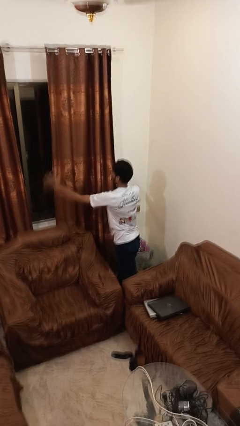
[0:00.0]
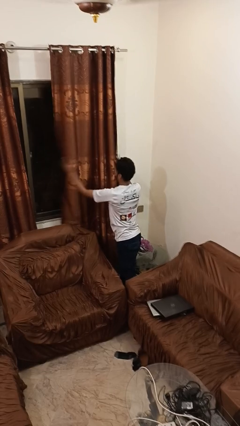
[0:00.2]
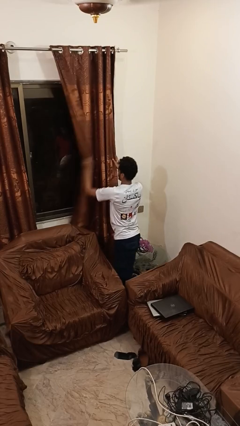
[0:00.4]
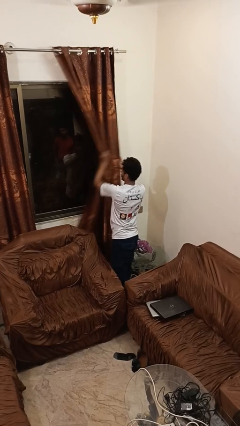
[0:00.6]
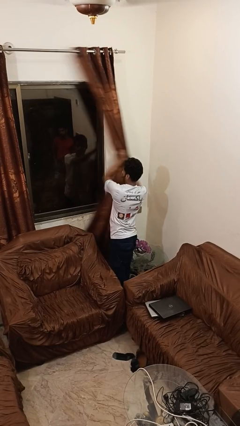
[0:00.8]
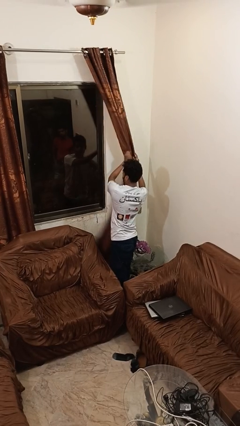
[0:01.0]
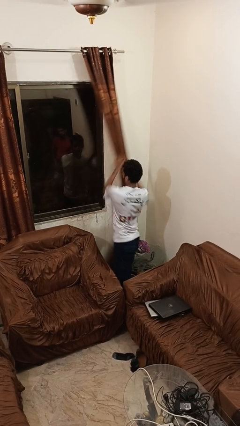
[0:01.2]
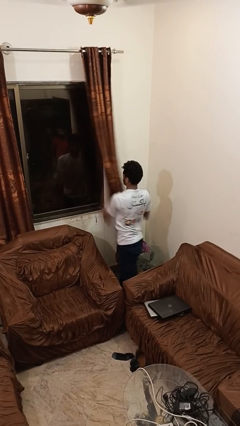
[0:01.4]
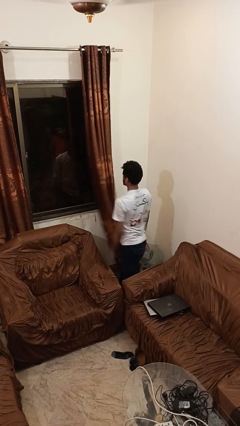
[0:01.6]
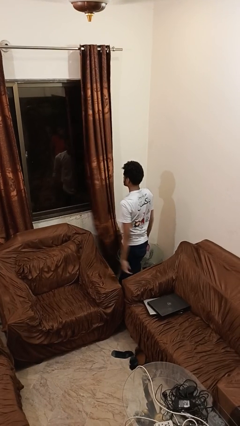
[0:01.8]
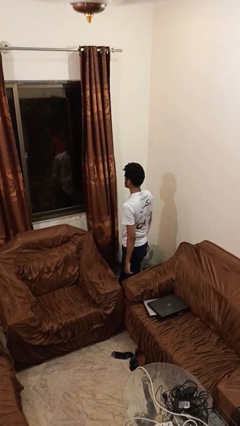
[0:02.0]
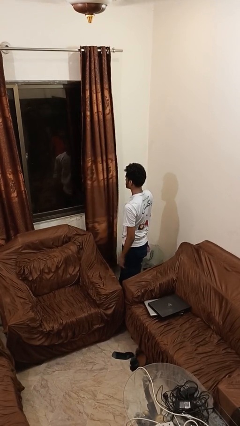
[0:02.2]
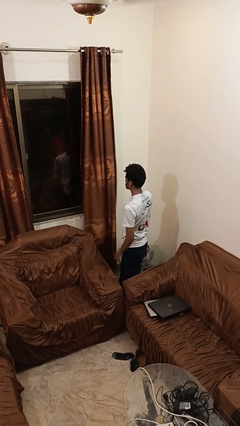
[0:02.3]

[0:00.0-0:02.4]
person opens curtains

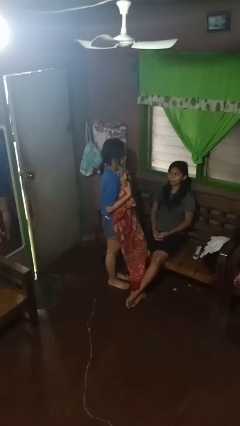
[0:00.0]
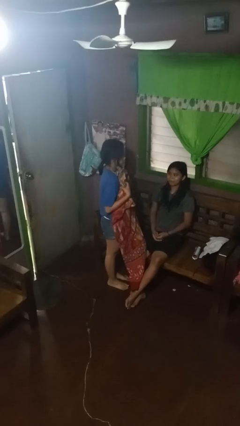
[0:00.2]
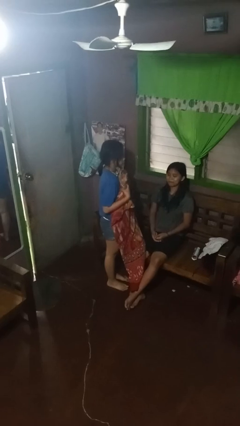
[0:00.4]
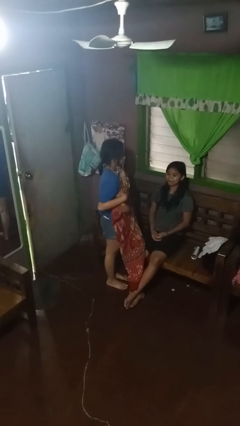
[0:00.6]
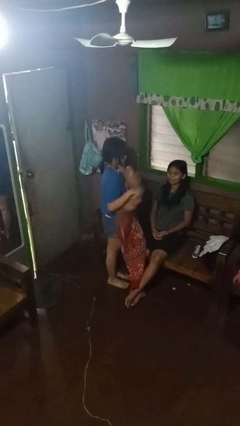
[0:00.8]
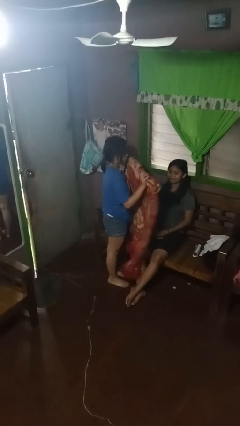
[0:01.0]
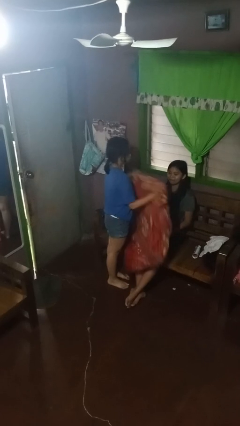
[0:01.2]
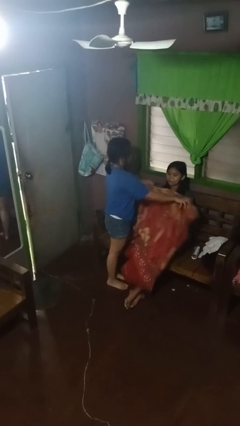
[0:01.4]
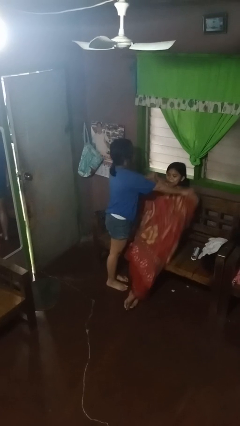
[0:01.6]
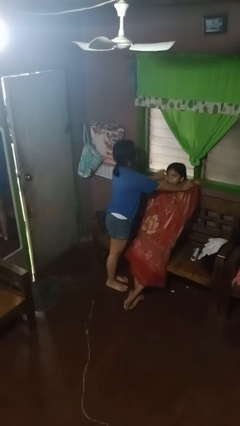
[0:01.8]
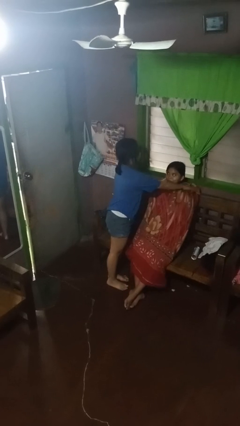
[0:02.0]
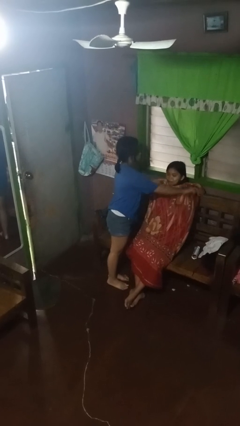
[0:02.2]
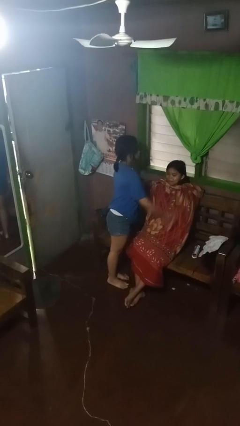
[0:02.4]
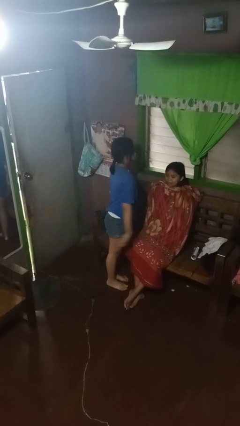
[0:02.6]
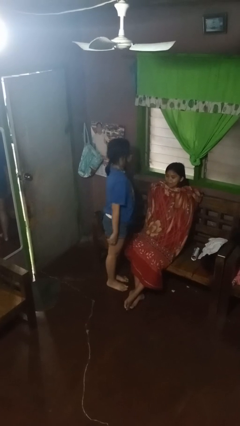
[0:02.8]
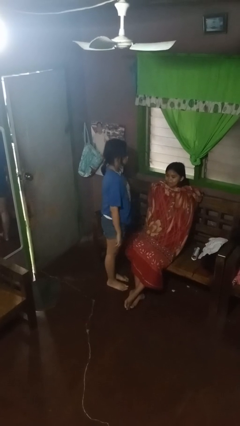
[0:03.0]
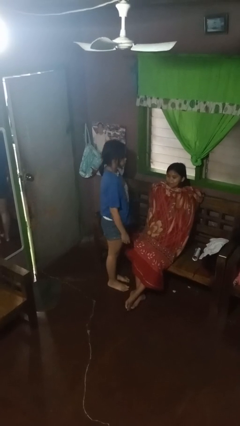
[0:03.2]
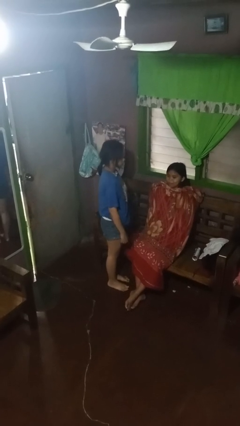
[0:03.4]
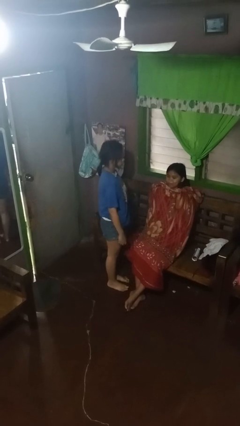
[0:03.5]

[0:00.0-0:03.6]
person covers friend with blanket

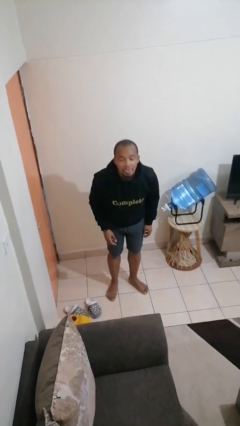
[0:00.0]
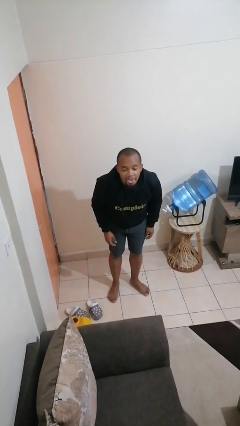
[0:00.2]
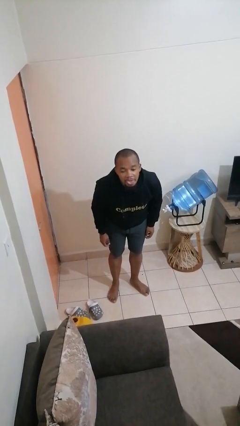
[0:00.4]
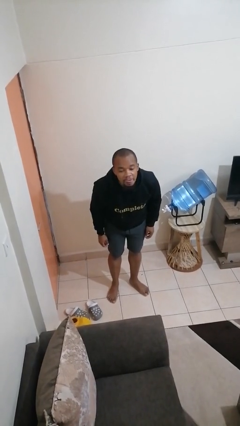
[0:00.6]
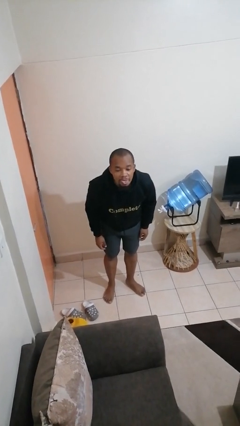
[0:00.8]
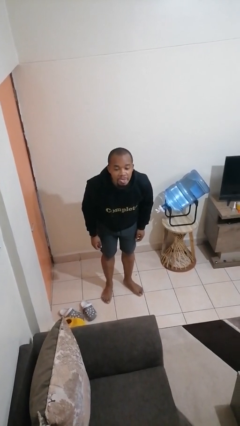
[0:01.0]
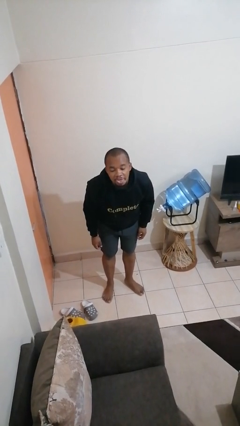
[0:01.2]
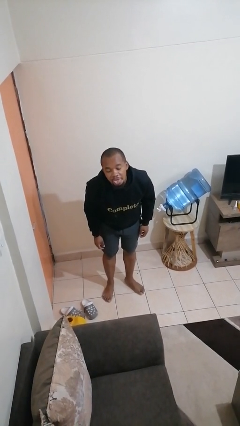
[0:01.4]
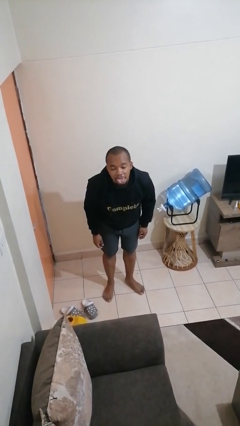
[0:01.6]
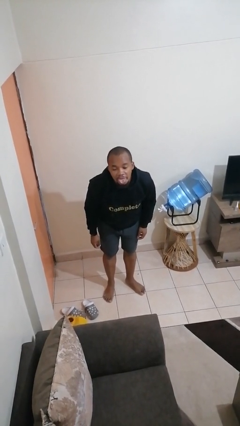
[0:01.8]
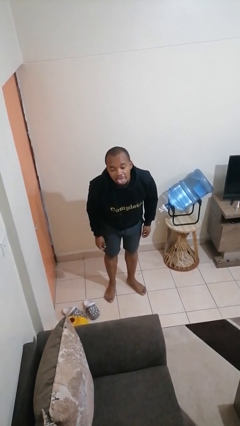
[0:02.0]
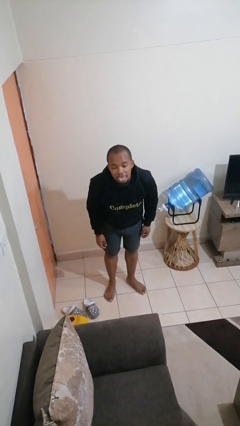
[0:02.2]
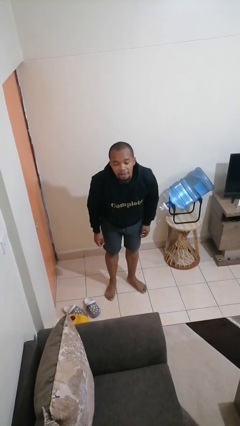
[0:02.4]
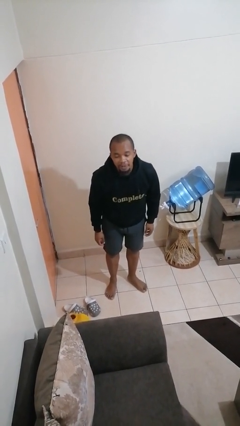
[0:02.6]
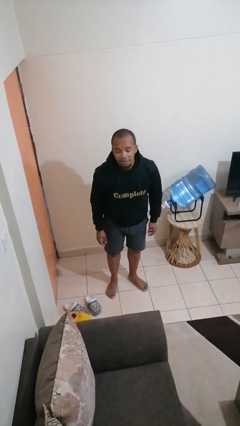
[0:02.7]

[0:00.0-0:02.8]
person sticks out tongue

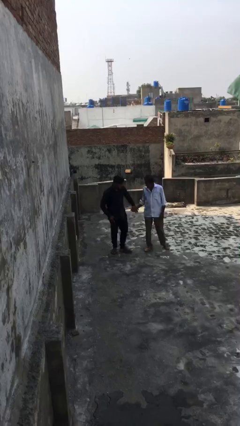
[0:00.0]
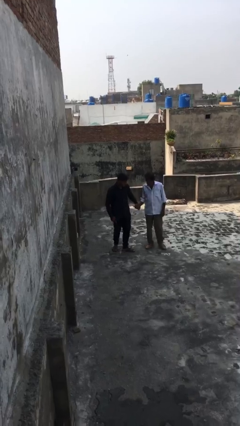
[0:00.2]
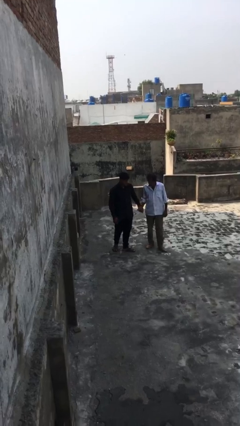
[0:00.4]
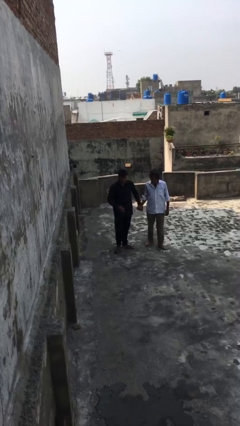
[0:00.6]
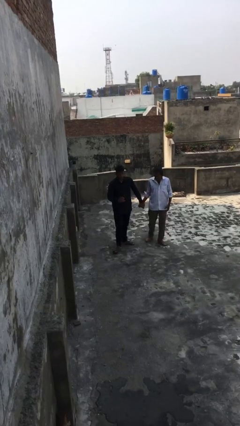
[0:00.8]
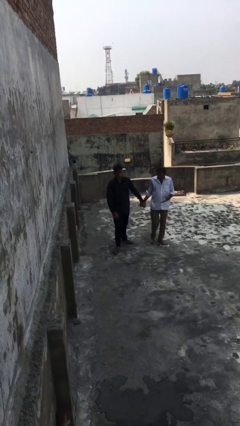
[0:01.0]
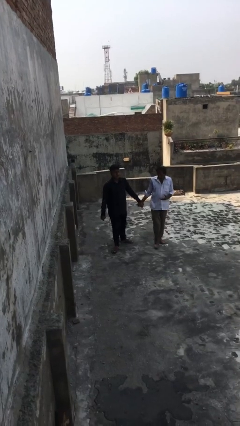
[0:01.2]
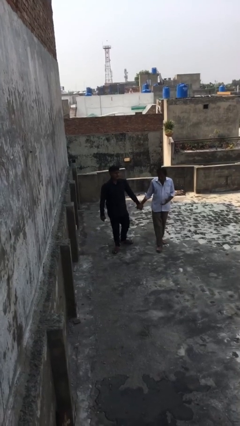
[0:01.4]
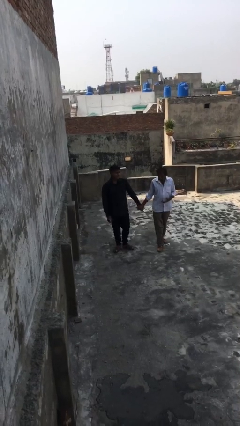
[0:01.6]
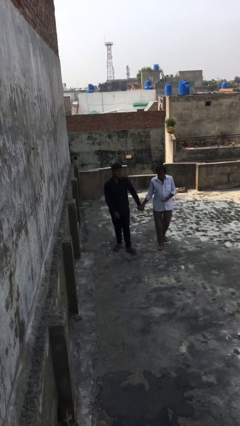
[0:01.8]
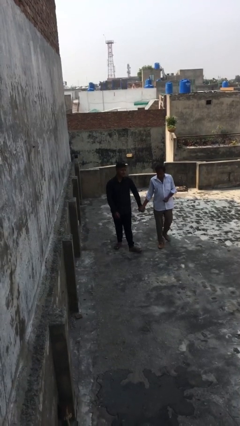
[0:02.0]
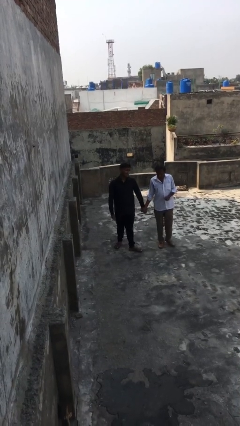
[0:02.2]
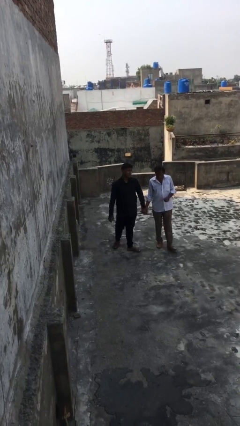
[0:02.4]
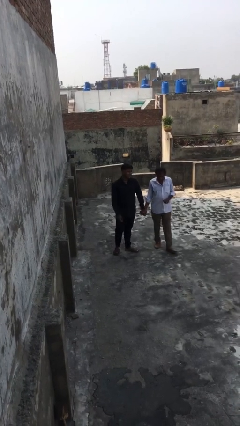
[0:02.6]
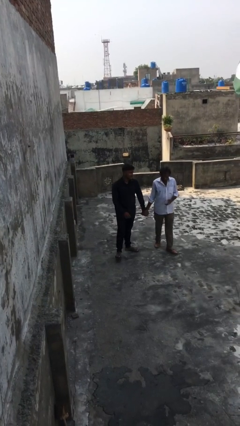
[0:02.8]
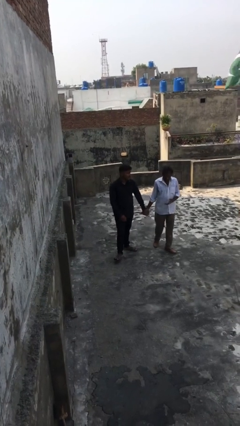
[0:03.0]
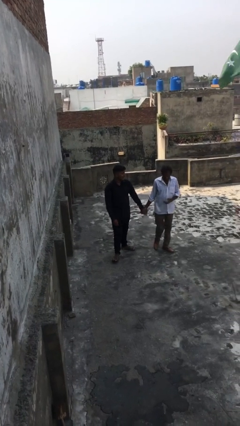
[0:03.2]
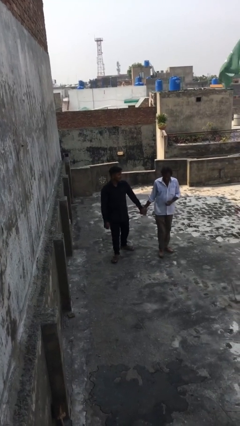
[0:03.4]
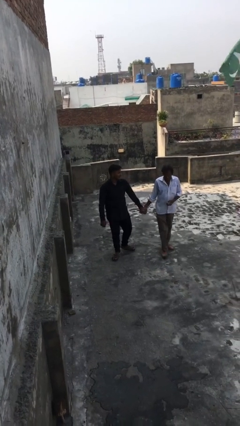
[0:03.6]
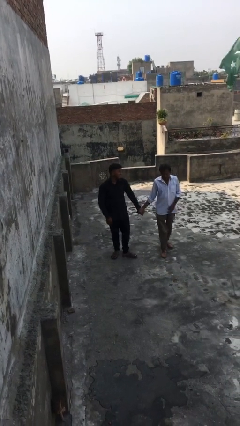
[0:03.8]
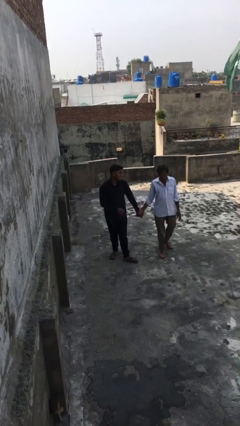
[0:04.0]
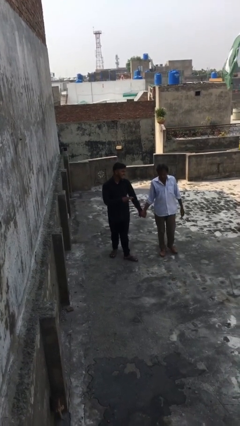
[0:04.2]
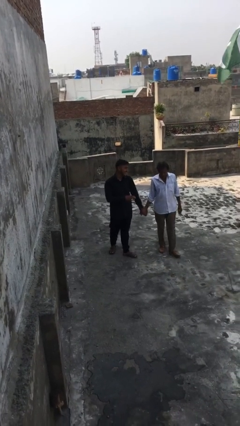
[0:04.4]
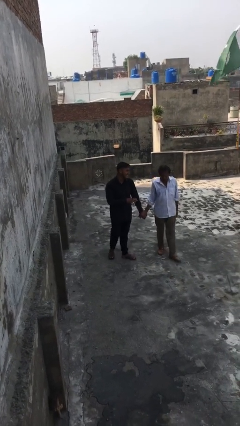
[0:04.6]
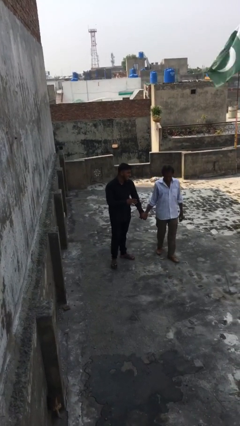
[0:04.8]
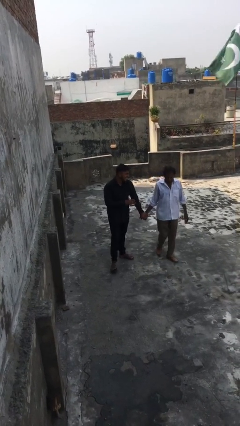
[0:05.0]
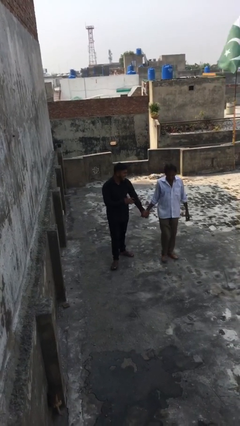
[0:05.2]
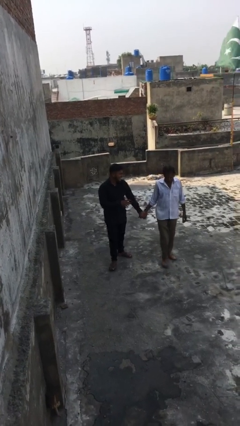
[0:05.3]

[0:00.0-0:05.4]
person holds hand

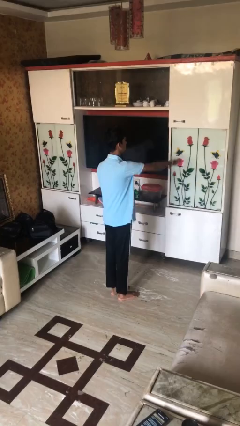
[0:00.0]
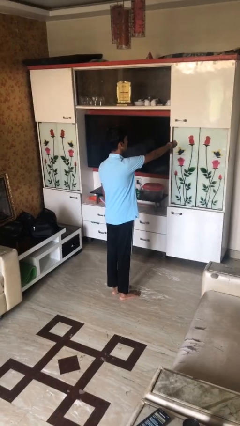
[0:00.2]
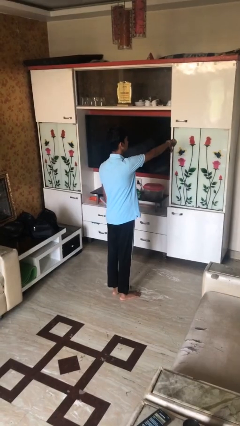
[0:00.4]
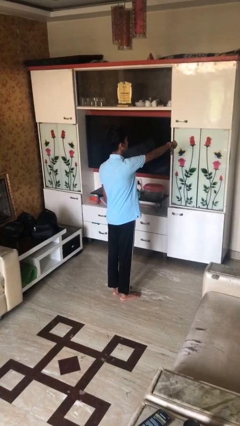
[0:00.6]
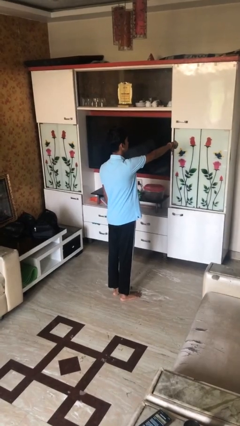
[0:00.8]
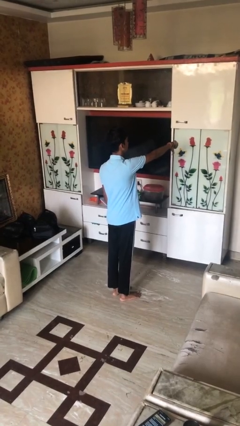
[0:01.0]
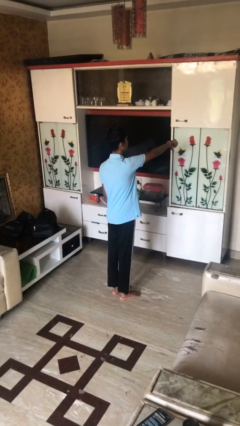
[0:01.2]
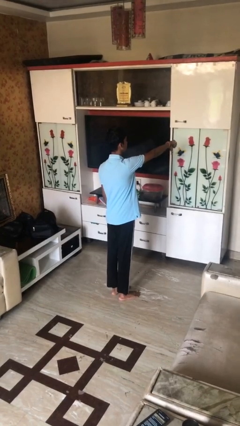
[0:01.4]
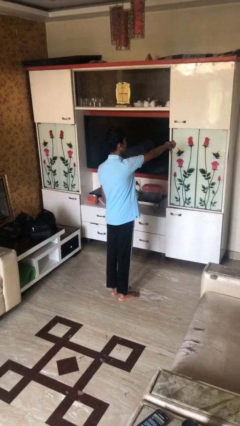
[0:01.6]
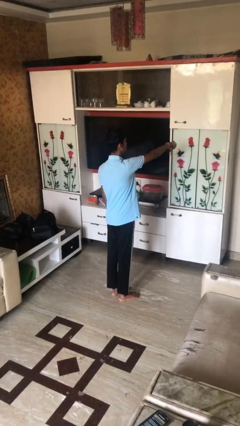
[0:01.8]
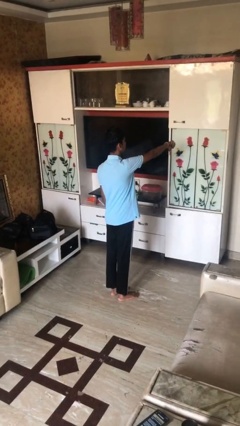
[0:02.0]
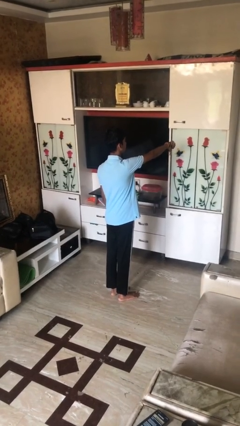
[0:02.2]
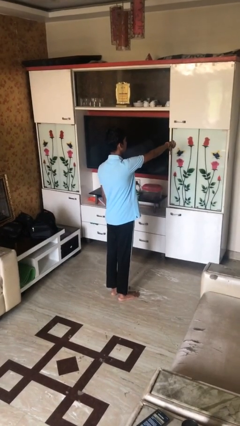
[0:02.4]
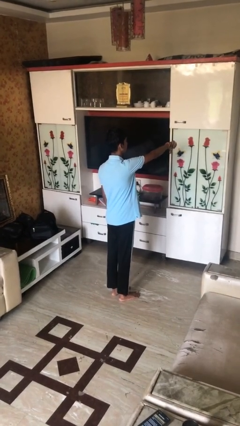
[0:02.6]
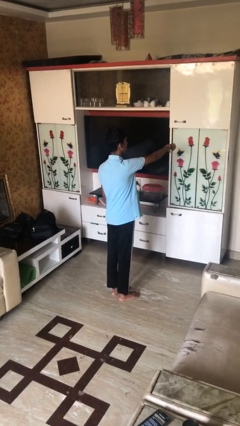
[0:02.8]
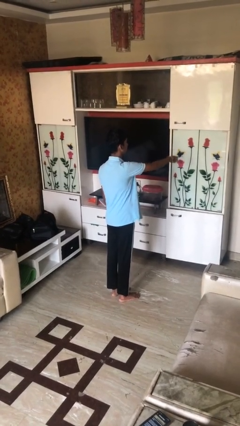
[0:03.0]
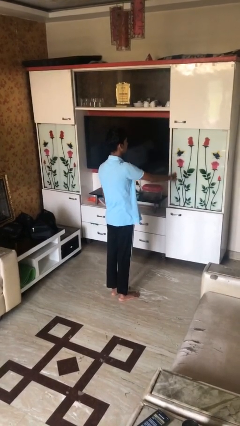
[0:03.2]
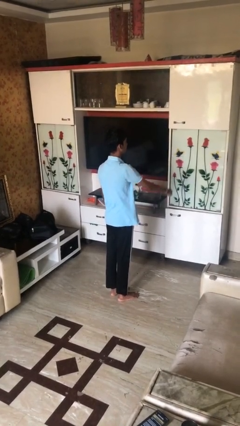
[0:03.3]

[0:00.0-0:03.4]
person gestures thumbs down

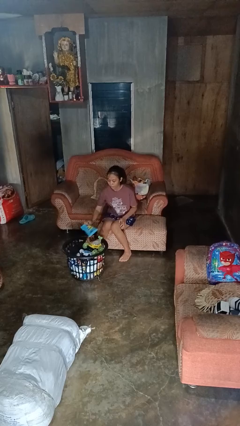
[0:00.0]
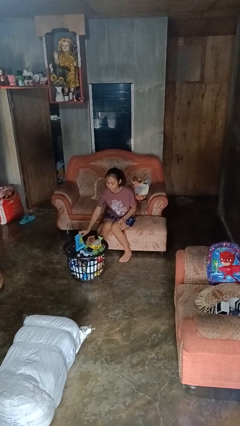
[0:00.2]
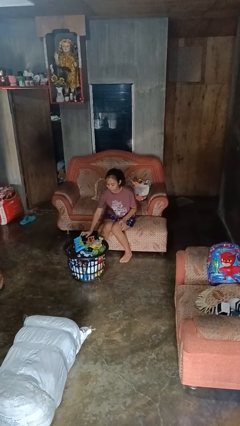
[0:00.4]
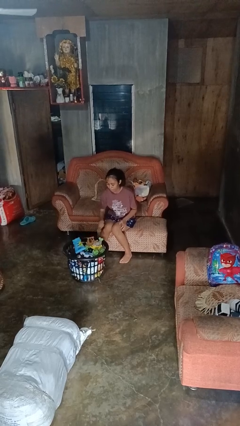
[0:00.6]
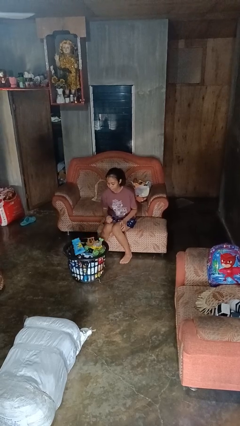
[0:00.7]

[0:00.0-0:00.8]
person puts object into basket
